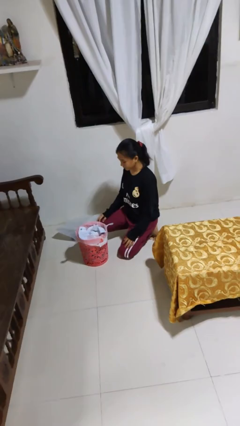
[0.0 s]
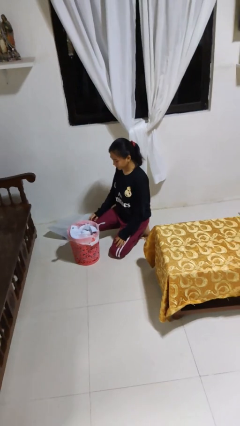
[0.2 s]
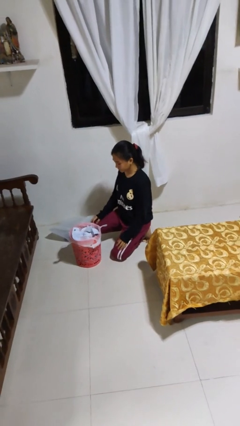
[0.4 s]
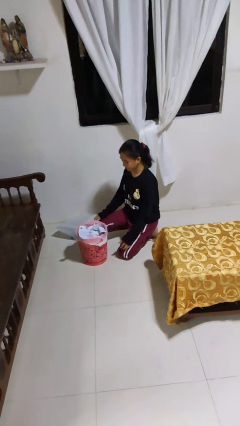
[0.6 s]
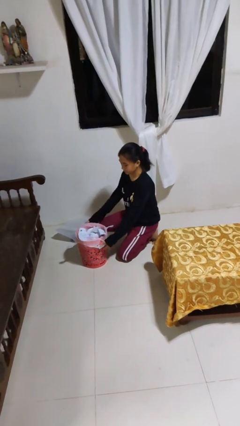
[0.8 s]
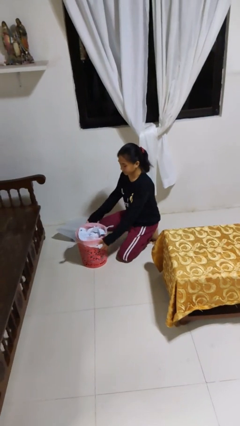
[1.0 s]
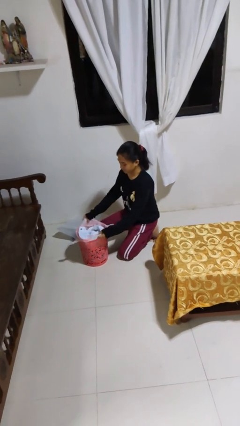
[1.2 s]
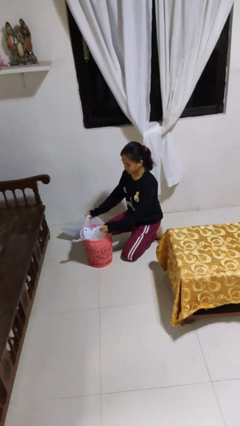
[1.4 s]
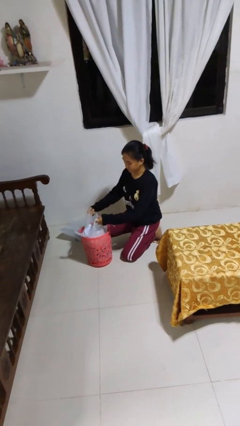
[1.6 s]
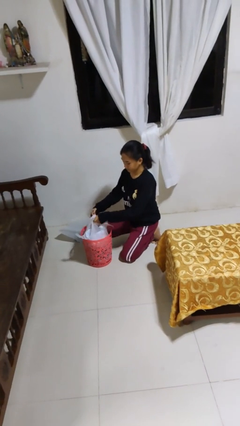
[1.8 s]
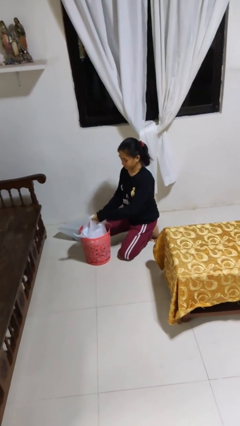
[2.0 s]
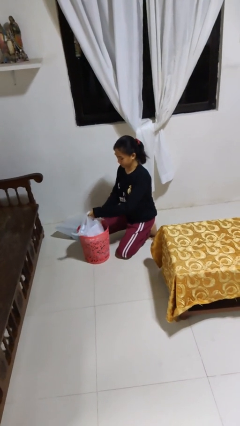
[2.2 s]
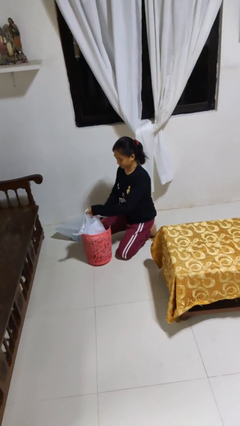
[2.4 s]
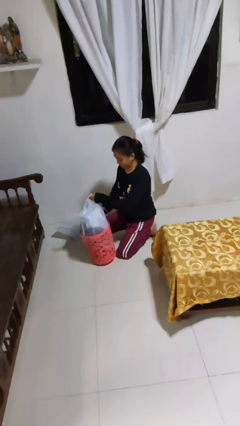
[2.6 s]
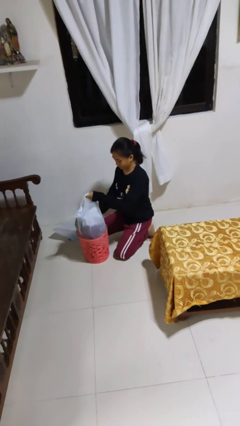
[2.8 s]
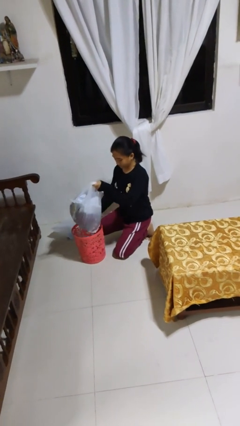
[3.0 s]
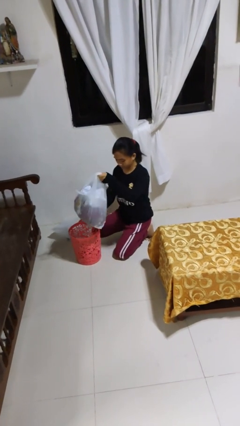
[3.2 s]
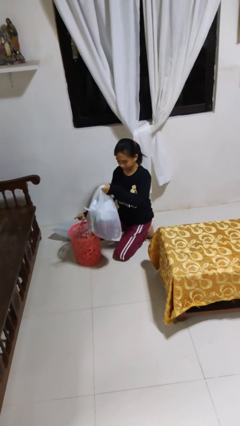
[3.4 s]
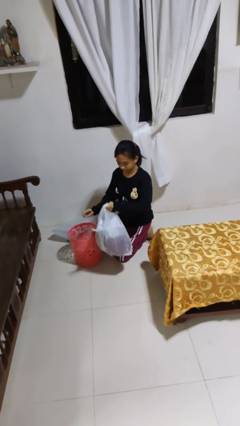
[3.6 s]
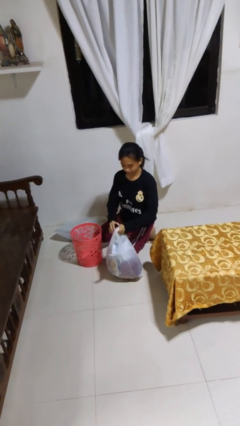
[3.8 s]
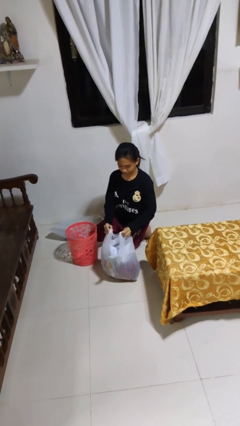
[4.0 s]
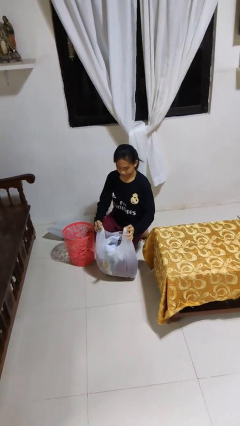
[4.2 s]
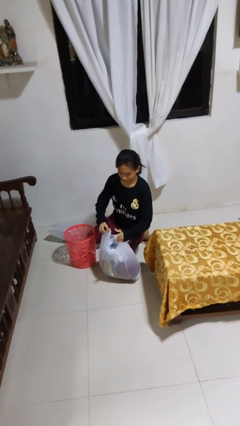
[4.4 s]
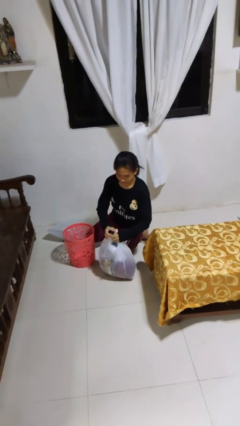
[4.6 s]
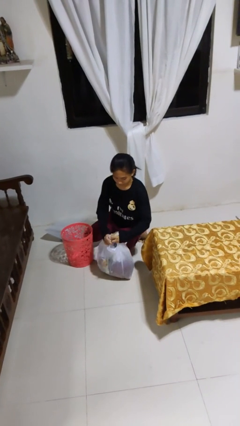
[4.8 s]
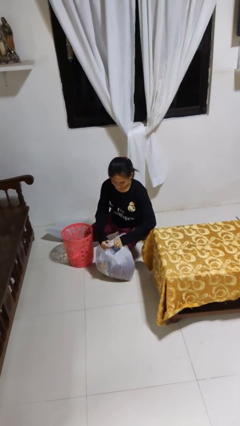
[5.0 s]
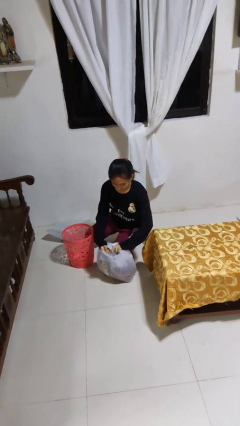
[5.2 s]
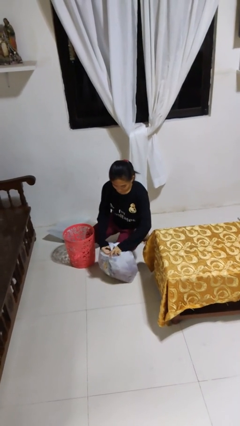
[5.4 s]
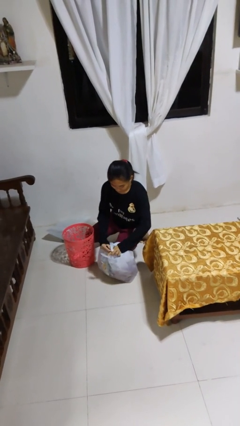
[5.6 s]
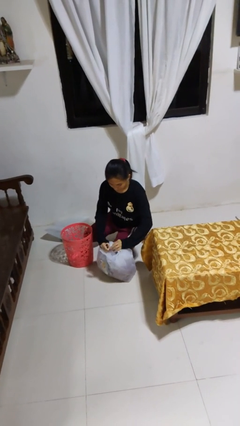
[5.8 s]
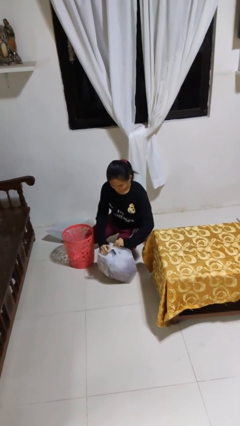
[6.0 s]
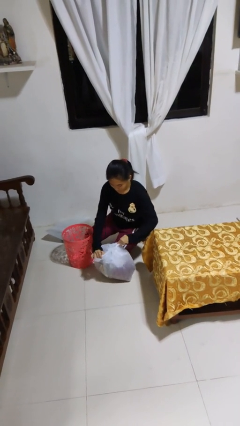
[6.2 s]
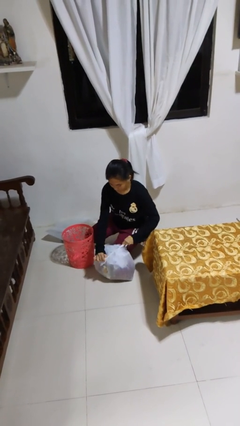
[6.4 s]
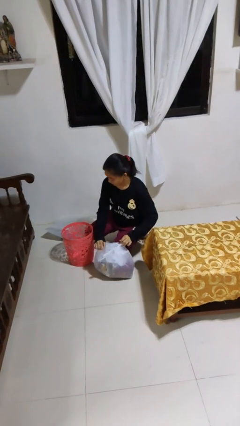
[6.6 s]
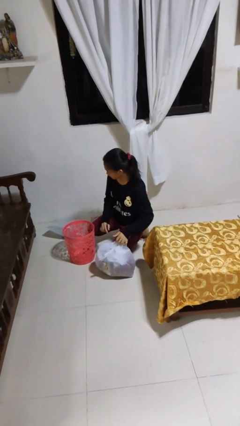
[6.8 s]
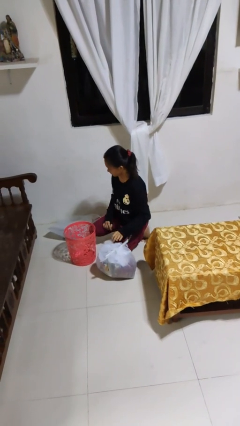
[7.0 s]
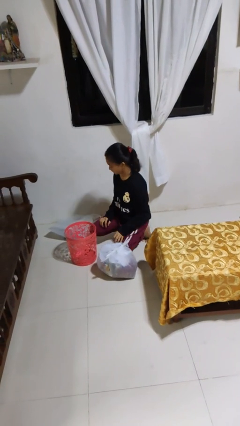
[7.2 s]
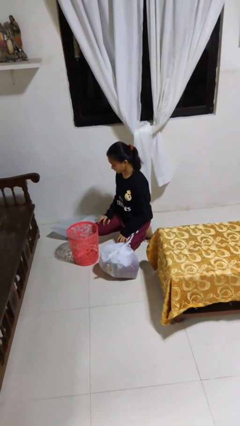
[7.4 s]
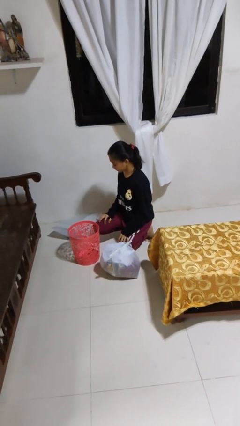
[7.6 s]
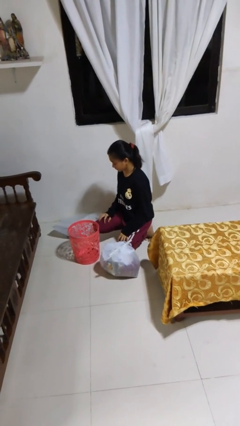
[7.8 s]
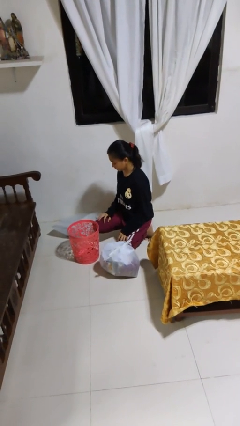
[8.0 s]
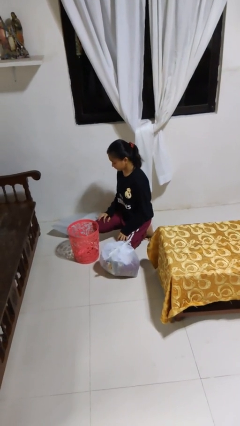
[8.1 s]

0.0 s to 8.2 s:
person removes trashbag from trashcan

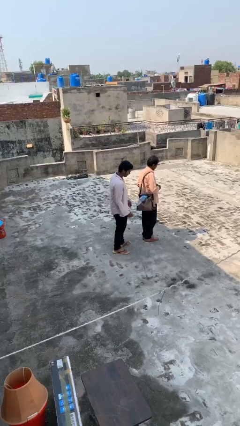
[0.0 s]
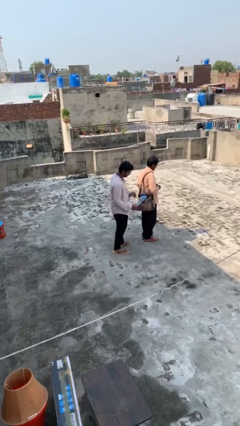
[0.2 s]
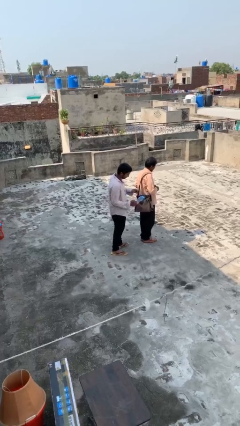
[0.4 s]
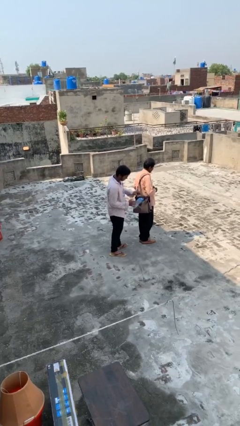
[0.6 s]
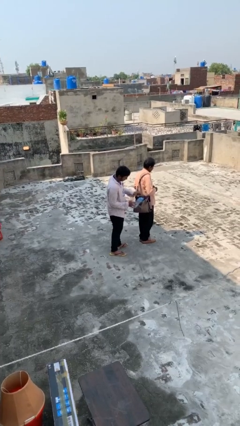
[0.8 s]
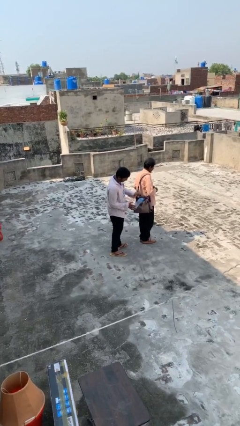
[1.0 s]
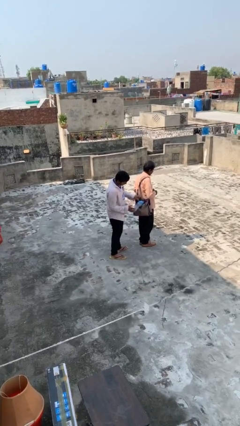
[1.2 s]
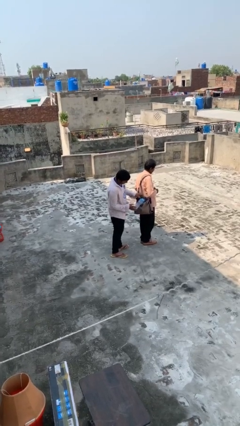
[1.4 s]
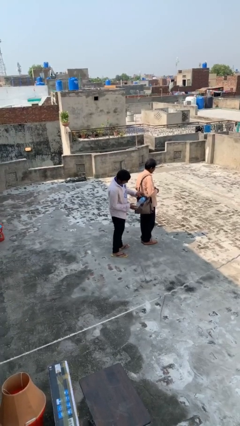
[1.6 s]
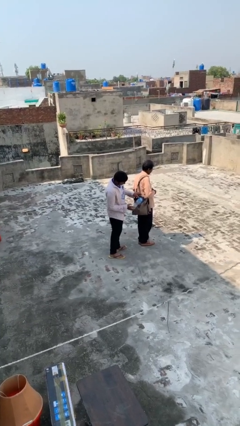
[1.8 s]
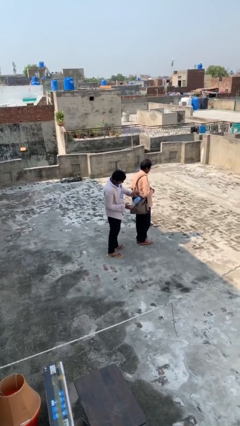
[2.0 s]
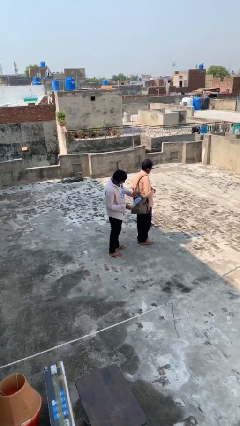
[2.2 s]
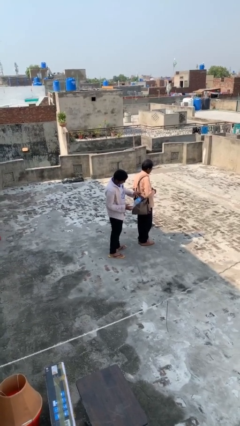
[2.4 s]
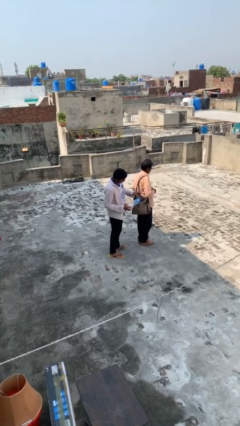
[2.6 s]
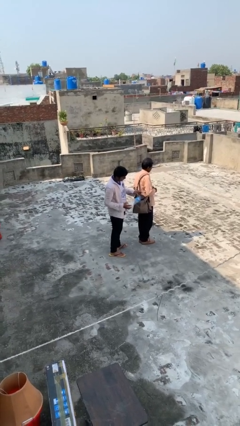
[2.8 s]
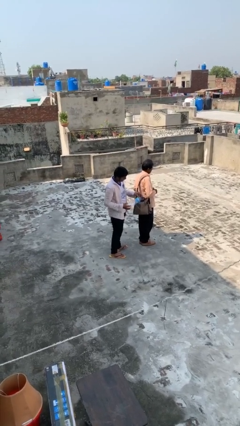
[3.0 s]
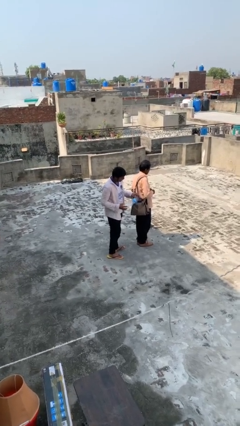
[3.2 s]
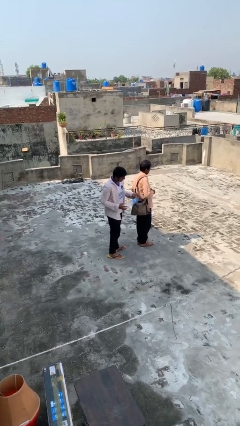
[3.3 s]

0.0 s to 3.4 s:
person steals object from person

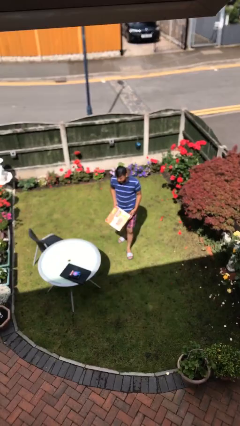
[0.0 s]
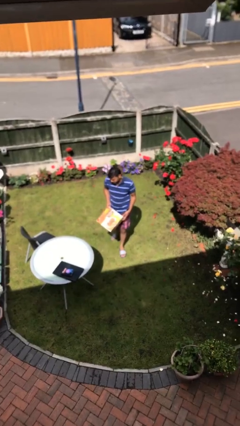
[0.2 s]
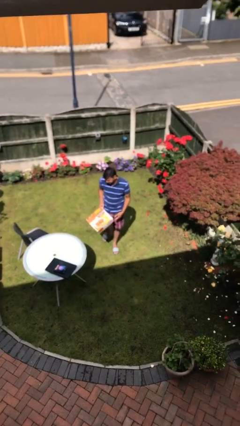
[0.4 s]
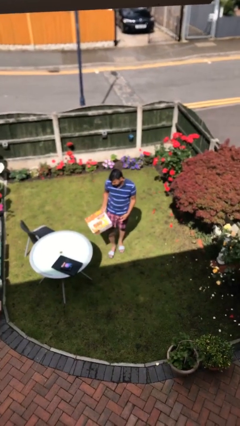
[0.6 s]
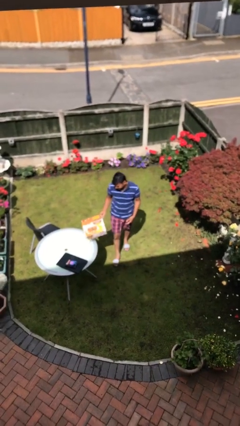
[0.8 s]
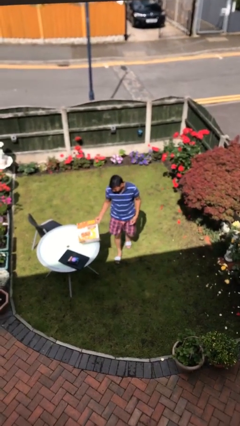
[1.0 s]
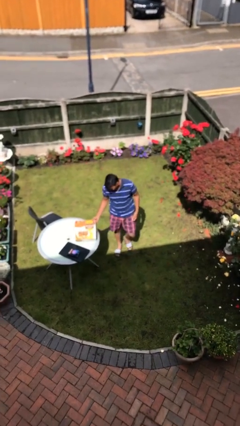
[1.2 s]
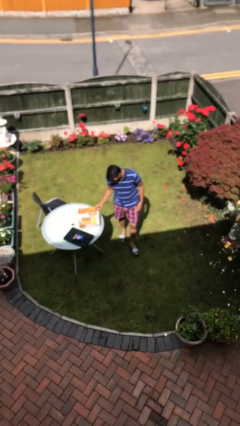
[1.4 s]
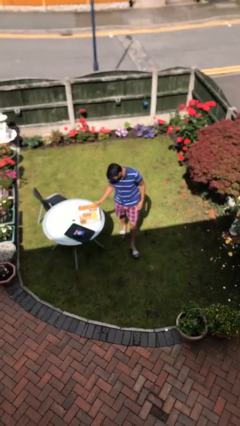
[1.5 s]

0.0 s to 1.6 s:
person puts down object on table

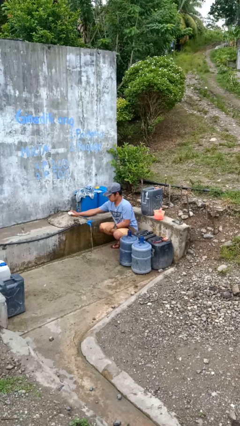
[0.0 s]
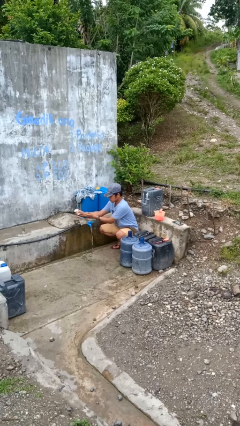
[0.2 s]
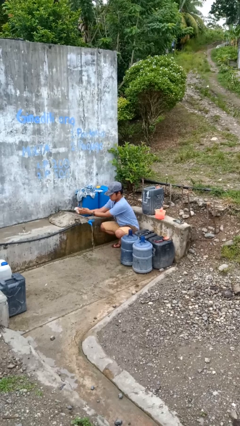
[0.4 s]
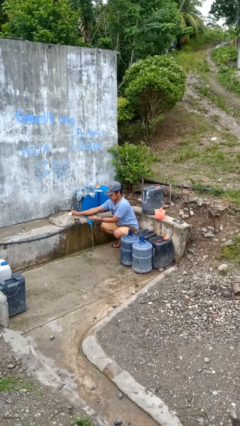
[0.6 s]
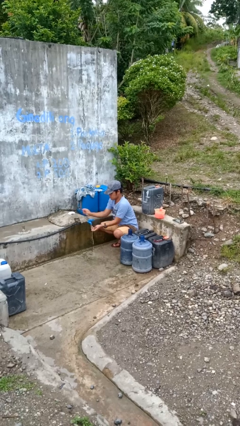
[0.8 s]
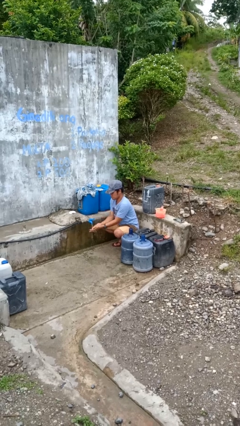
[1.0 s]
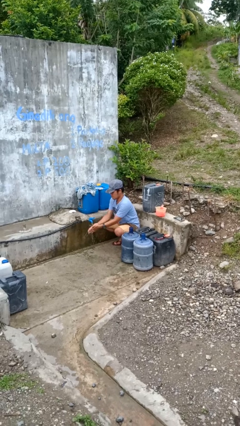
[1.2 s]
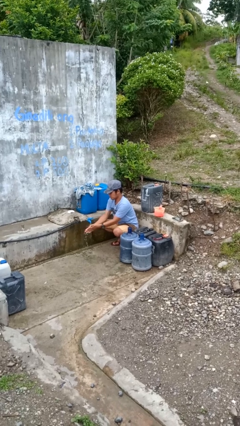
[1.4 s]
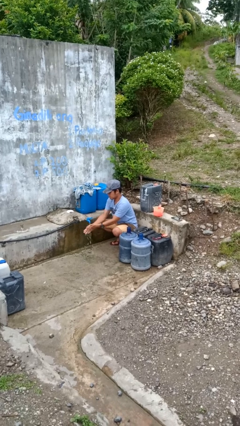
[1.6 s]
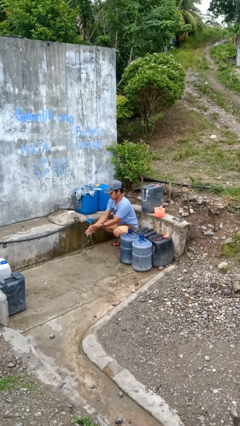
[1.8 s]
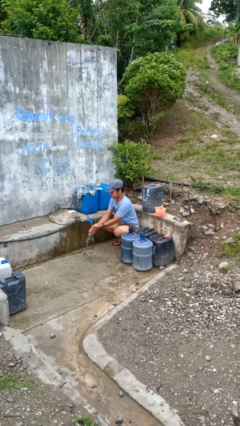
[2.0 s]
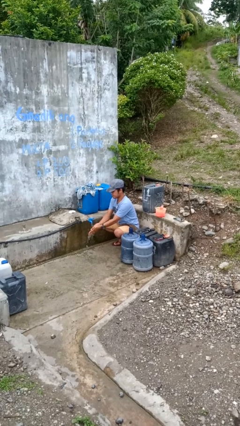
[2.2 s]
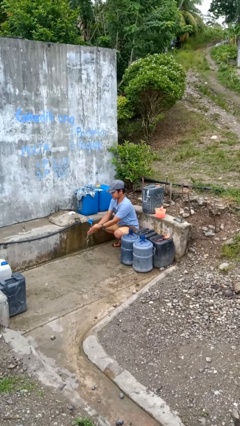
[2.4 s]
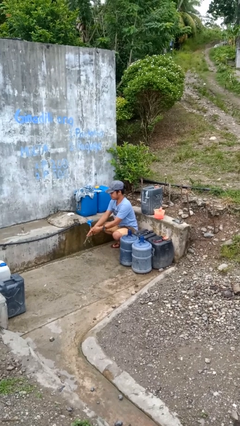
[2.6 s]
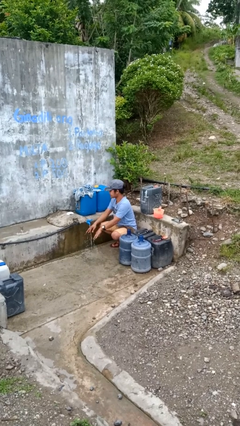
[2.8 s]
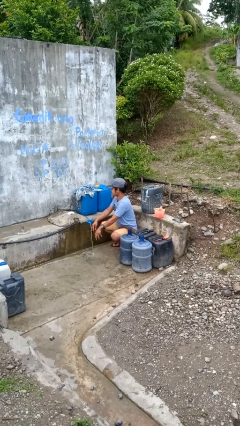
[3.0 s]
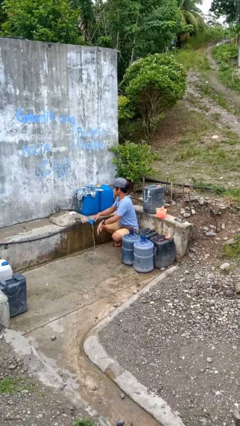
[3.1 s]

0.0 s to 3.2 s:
person washes hands

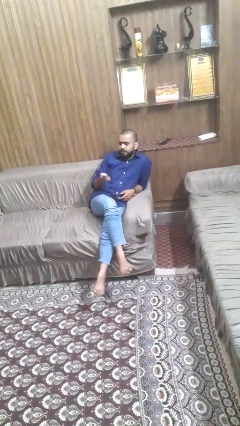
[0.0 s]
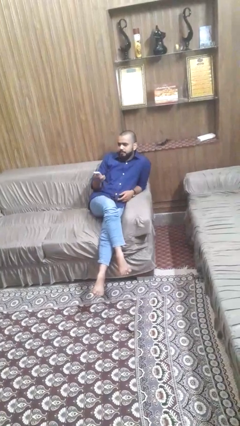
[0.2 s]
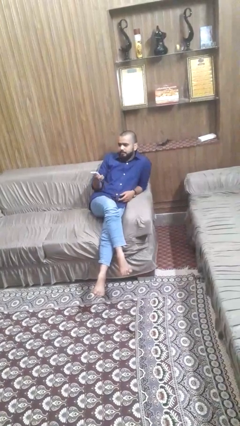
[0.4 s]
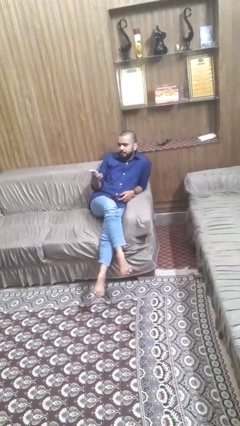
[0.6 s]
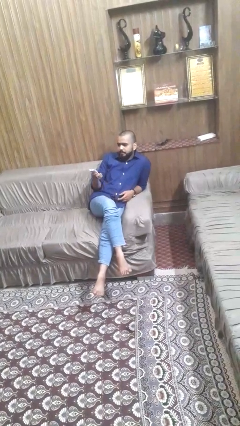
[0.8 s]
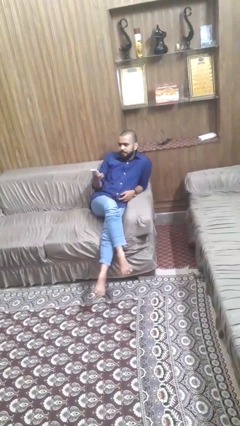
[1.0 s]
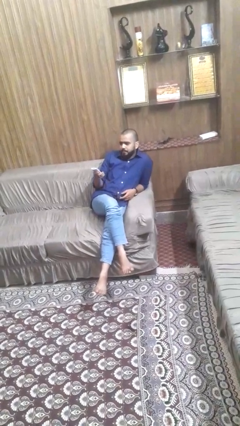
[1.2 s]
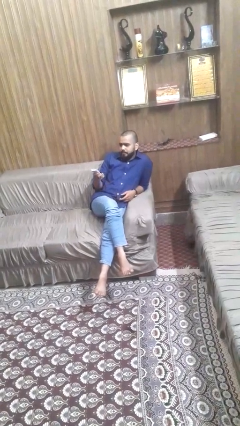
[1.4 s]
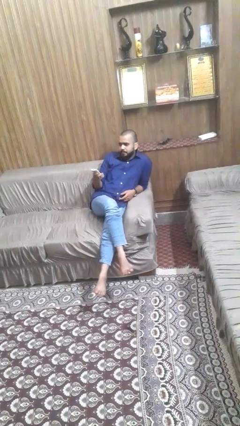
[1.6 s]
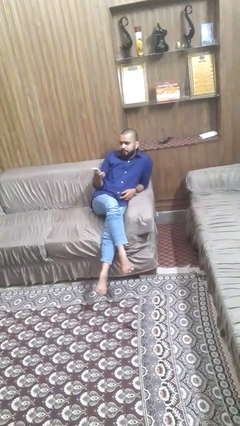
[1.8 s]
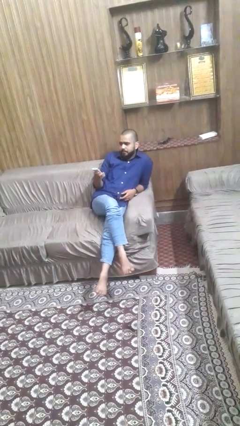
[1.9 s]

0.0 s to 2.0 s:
person uses television remote
